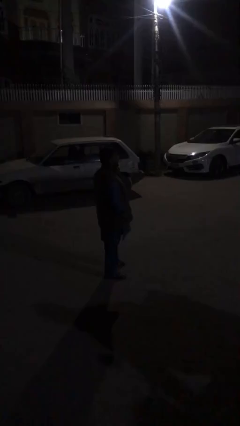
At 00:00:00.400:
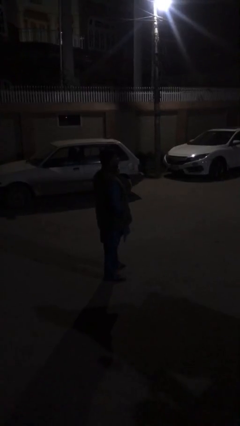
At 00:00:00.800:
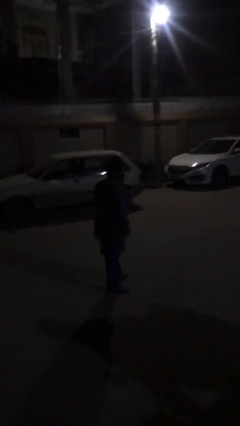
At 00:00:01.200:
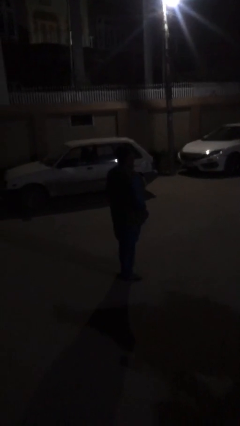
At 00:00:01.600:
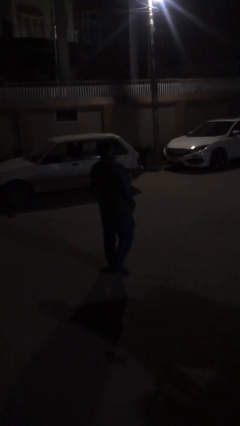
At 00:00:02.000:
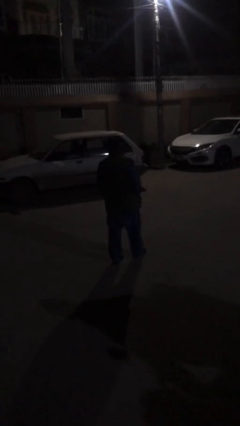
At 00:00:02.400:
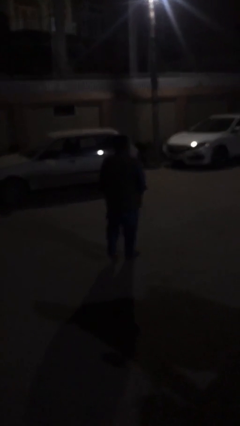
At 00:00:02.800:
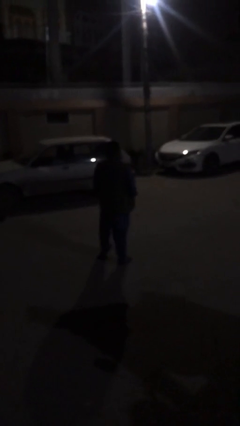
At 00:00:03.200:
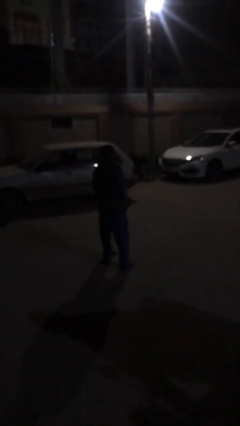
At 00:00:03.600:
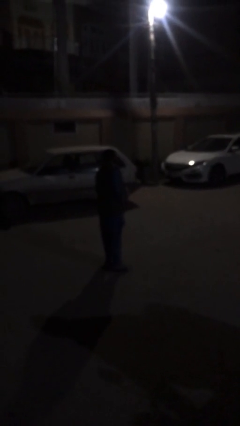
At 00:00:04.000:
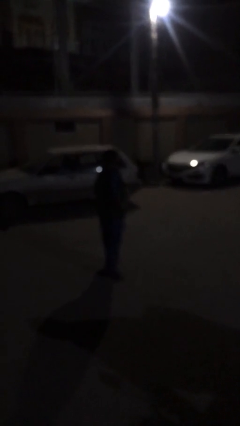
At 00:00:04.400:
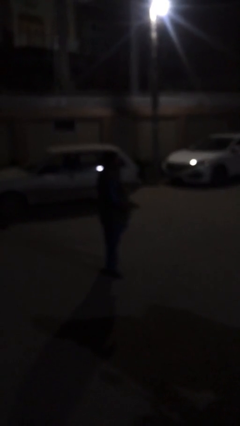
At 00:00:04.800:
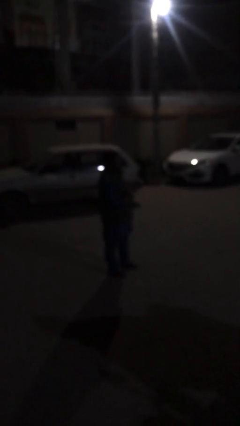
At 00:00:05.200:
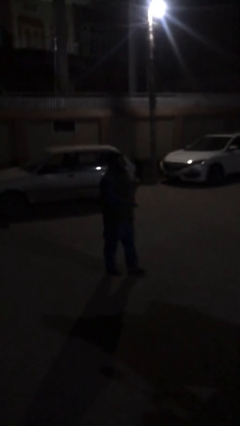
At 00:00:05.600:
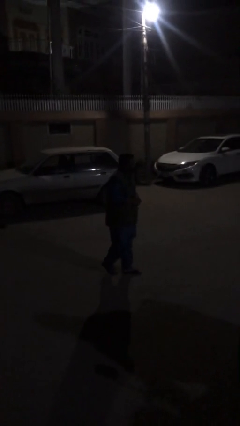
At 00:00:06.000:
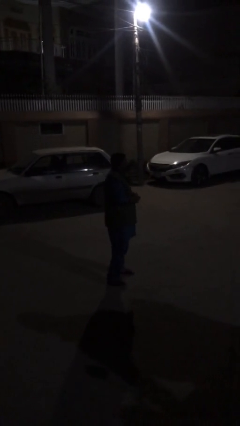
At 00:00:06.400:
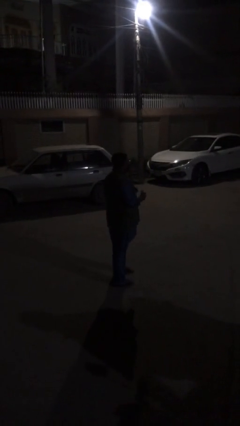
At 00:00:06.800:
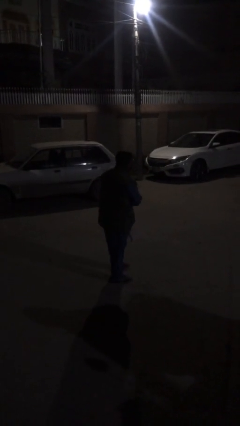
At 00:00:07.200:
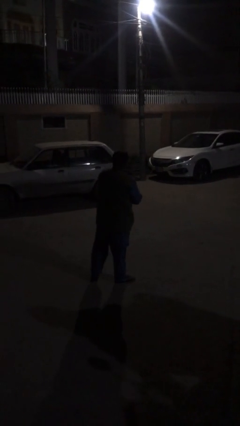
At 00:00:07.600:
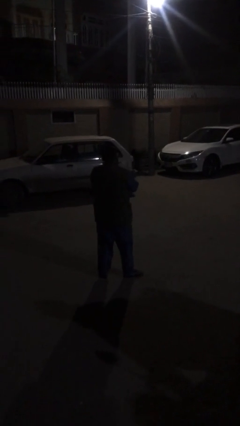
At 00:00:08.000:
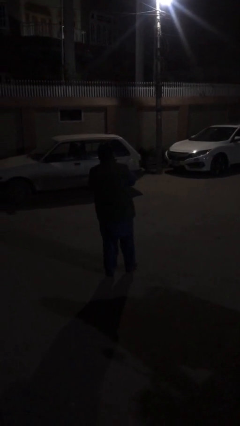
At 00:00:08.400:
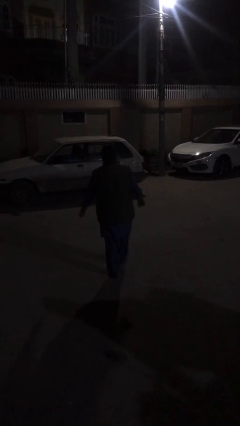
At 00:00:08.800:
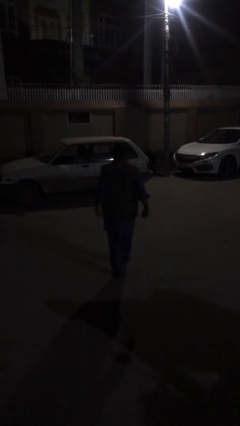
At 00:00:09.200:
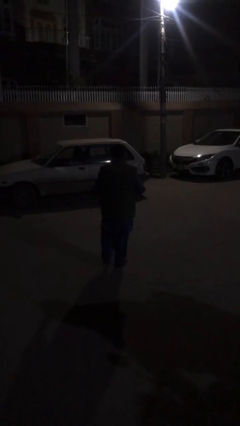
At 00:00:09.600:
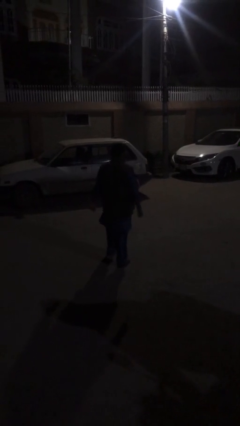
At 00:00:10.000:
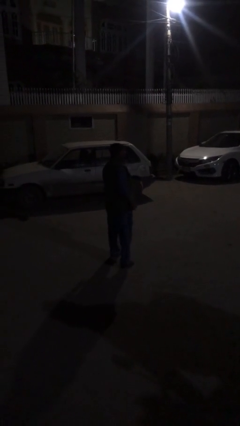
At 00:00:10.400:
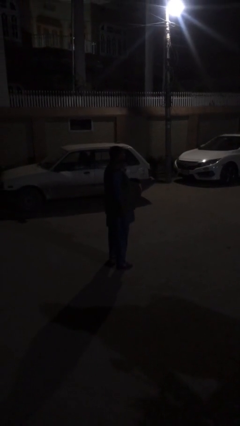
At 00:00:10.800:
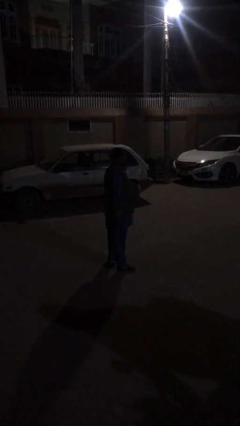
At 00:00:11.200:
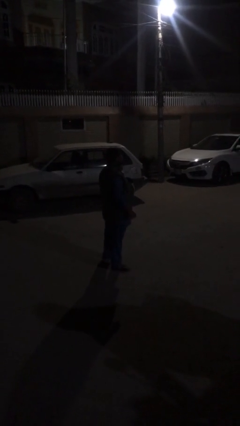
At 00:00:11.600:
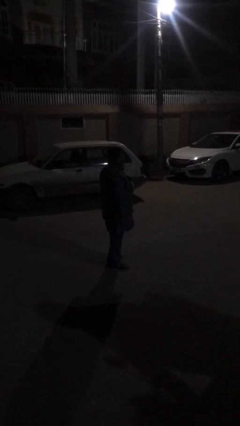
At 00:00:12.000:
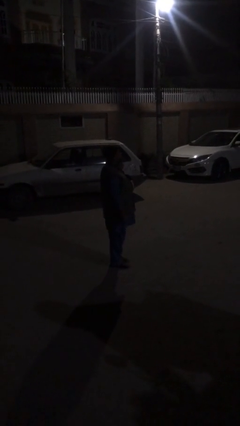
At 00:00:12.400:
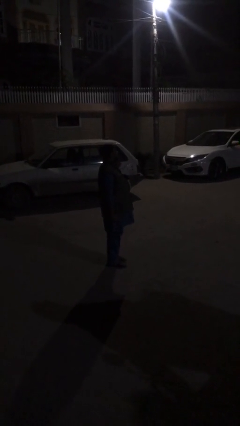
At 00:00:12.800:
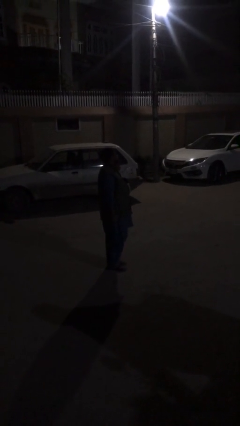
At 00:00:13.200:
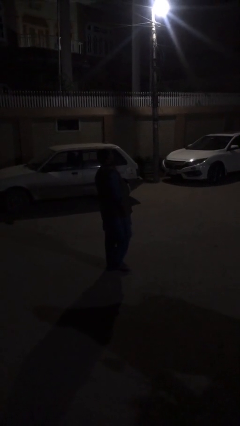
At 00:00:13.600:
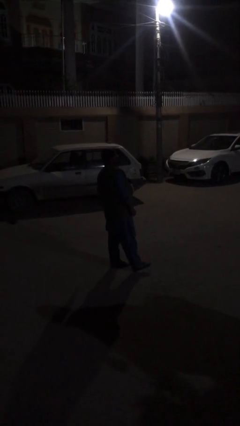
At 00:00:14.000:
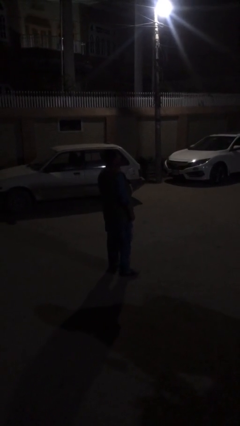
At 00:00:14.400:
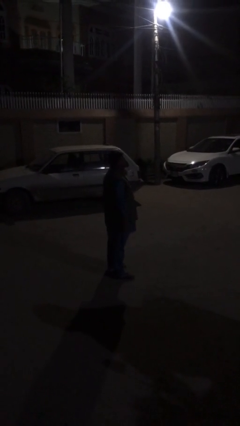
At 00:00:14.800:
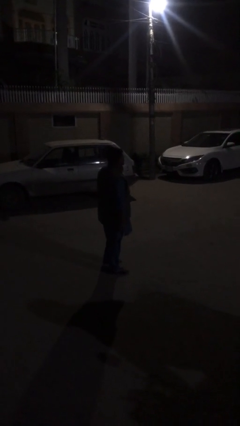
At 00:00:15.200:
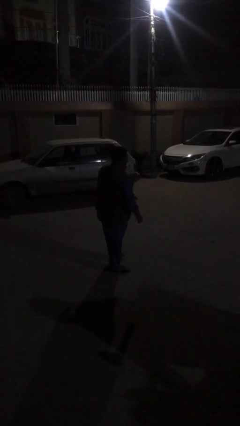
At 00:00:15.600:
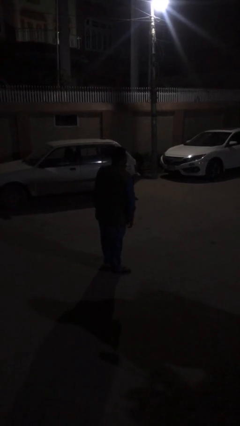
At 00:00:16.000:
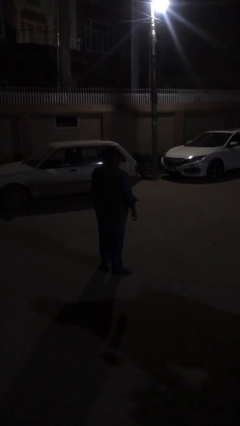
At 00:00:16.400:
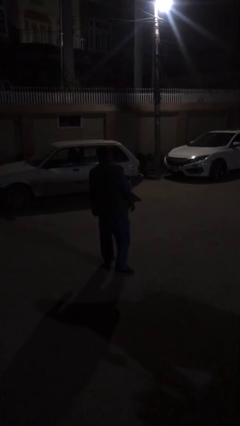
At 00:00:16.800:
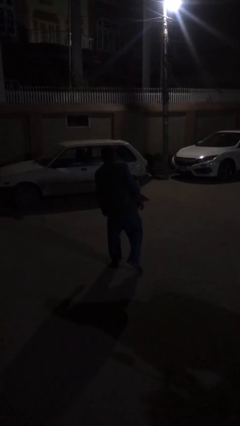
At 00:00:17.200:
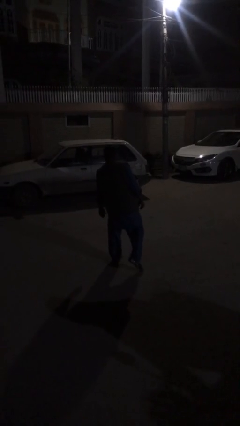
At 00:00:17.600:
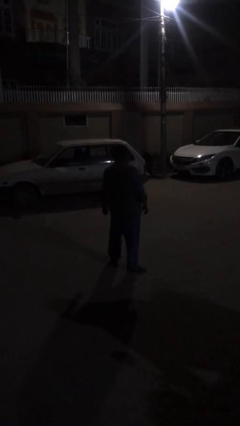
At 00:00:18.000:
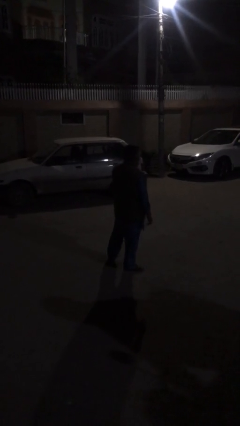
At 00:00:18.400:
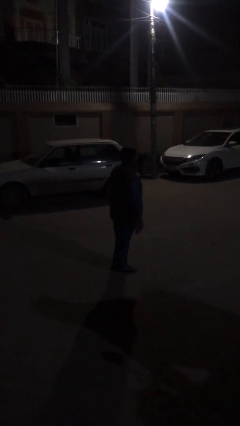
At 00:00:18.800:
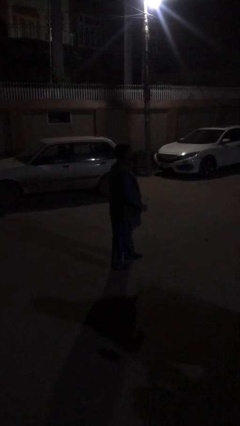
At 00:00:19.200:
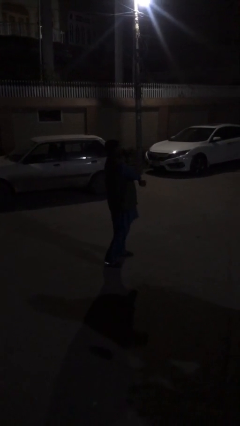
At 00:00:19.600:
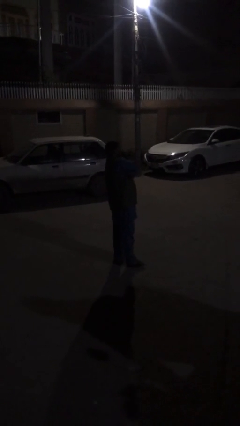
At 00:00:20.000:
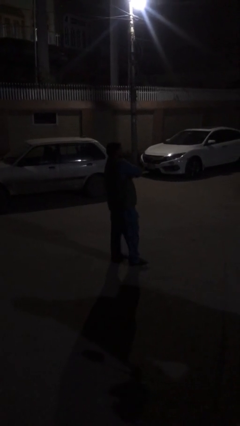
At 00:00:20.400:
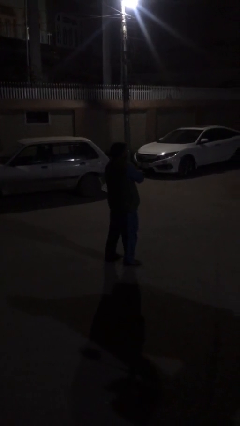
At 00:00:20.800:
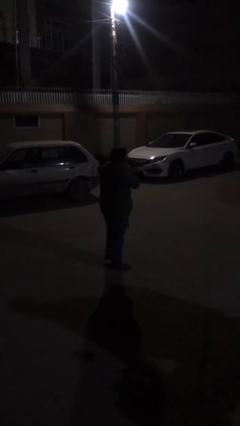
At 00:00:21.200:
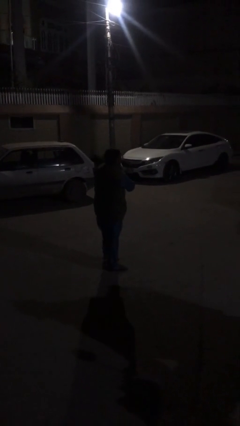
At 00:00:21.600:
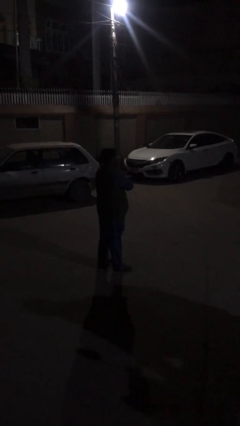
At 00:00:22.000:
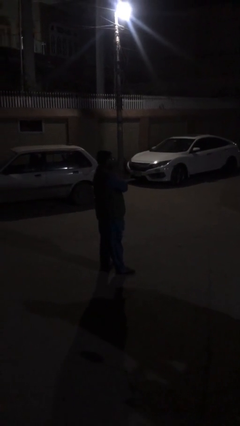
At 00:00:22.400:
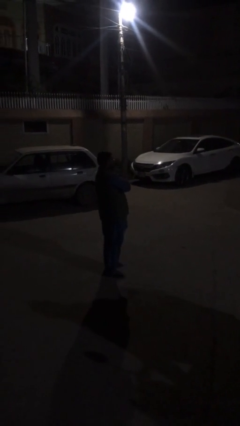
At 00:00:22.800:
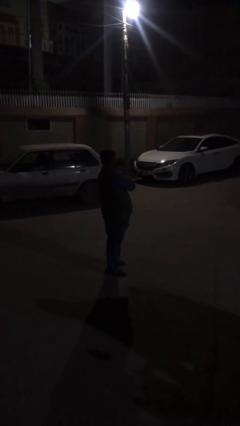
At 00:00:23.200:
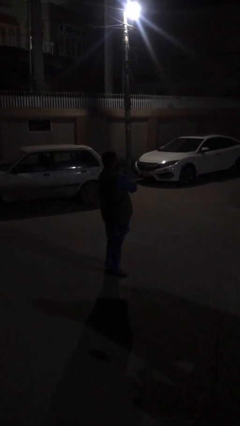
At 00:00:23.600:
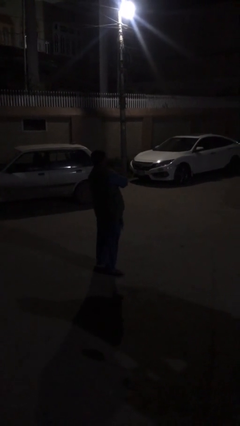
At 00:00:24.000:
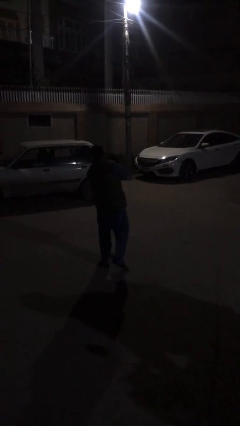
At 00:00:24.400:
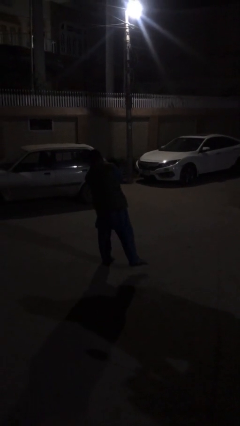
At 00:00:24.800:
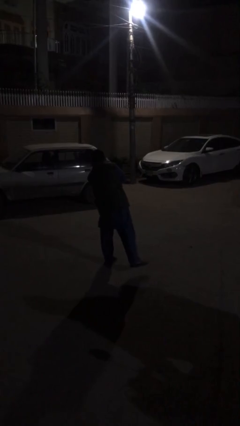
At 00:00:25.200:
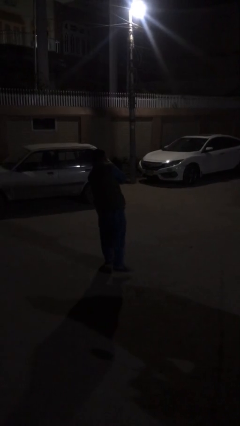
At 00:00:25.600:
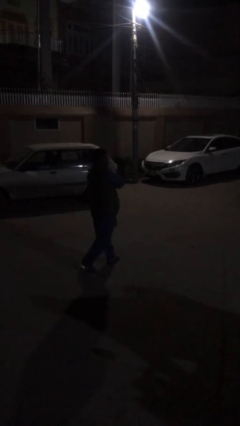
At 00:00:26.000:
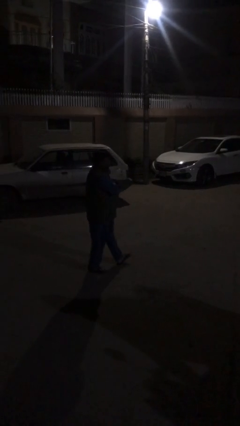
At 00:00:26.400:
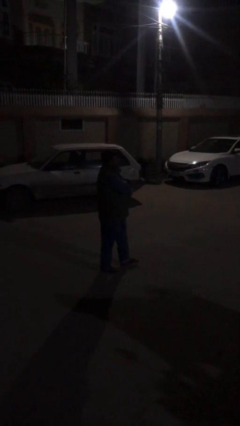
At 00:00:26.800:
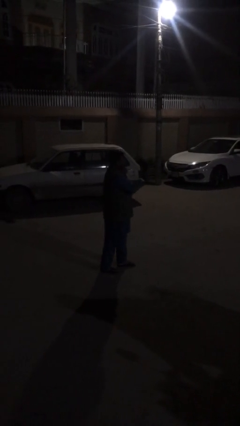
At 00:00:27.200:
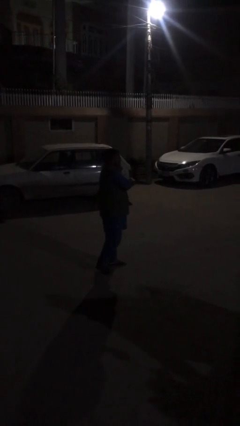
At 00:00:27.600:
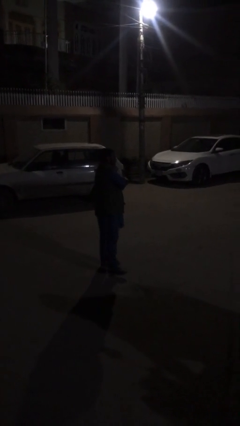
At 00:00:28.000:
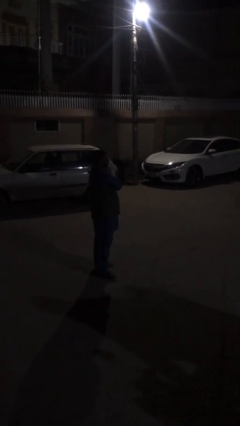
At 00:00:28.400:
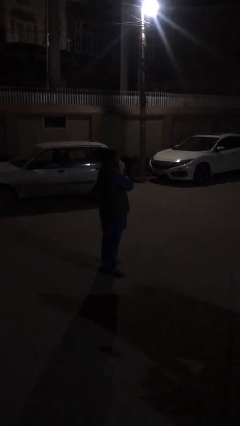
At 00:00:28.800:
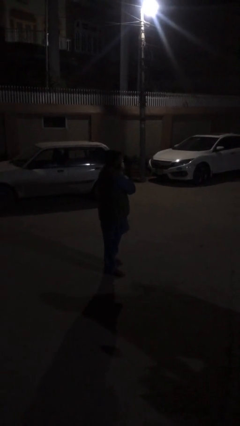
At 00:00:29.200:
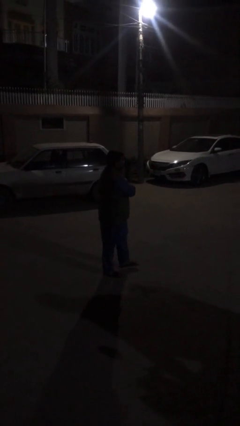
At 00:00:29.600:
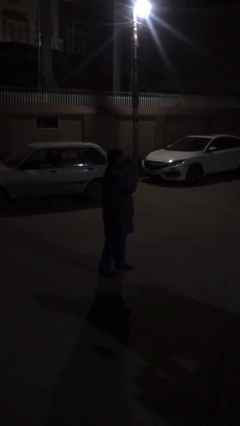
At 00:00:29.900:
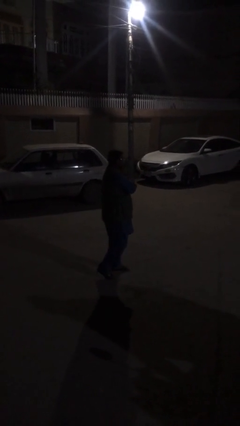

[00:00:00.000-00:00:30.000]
person walks

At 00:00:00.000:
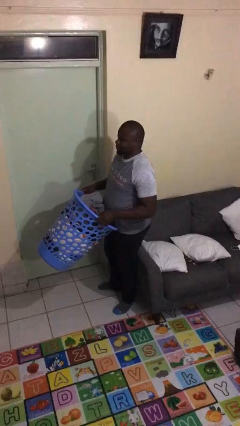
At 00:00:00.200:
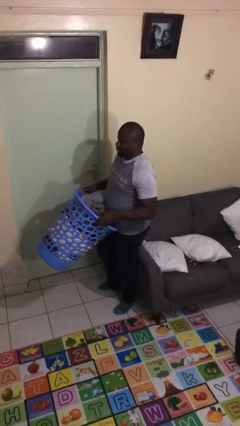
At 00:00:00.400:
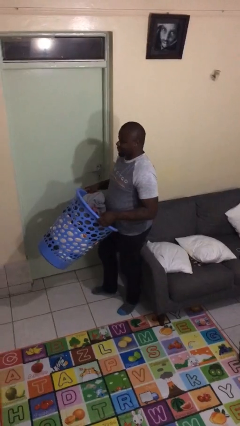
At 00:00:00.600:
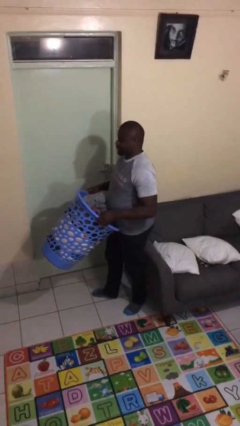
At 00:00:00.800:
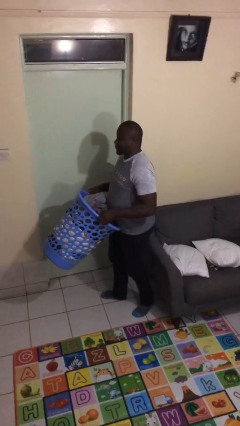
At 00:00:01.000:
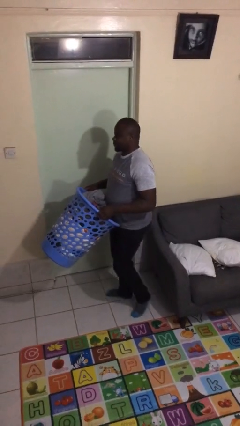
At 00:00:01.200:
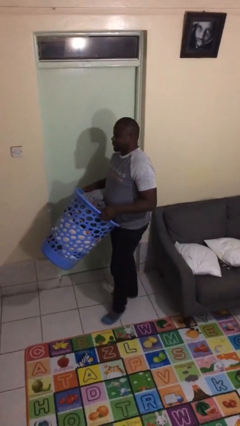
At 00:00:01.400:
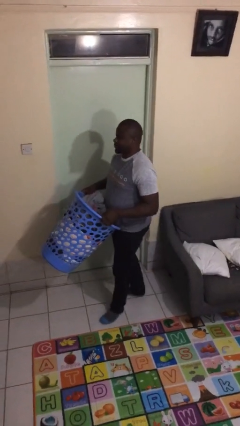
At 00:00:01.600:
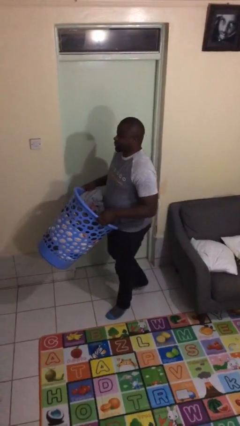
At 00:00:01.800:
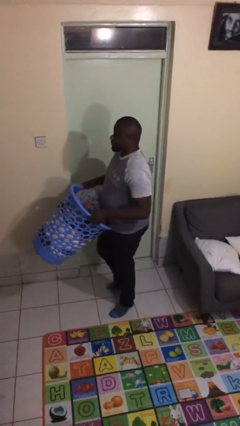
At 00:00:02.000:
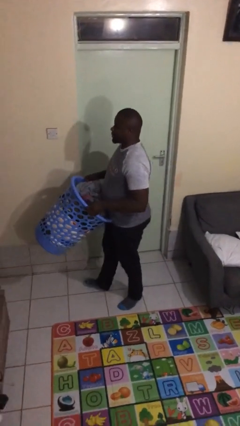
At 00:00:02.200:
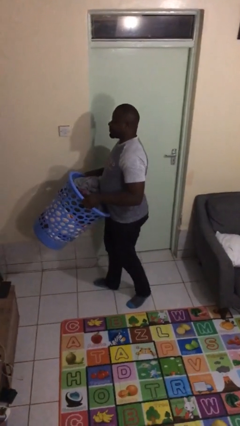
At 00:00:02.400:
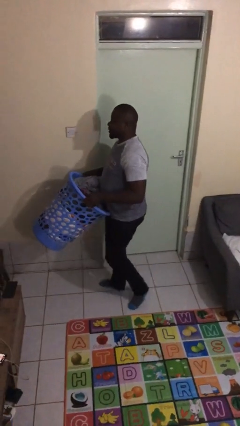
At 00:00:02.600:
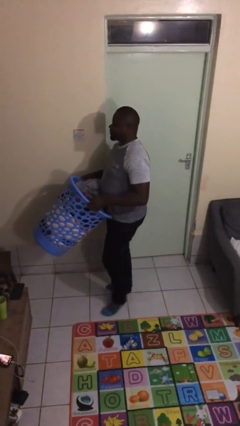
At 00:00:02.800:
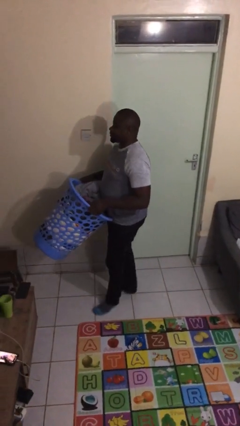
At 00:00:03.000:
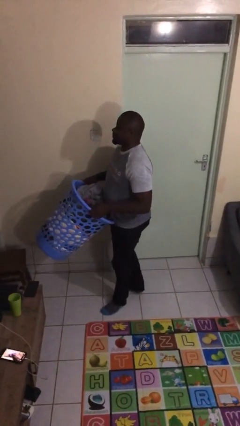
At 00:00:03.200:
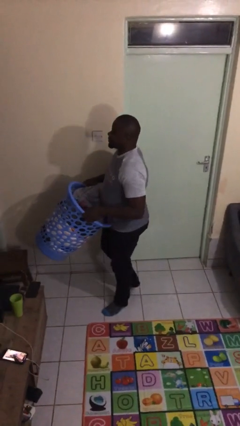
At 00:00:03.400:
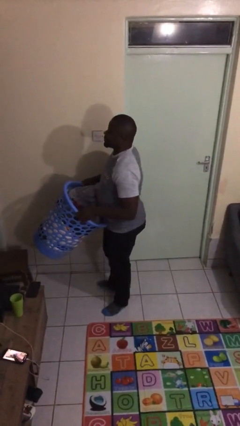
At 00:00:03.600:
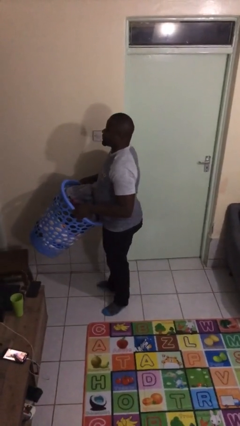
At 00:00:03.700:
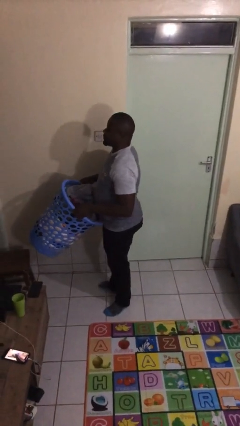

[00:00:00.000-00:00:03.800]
person carries laundry basket
